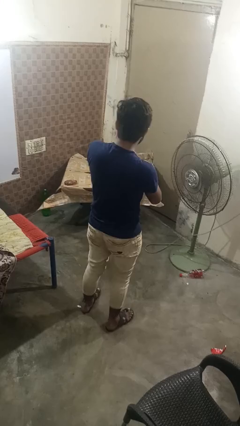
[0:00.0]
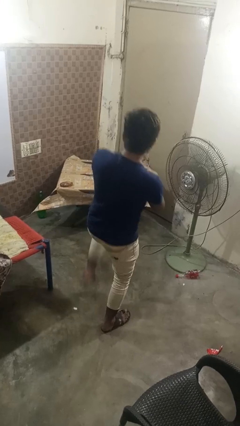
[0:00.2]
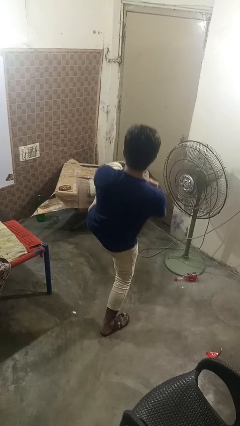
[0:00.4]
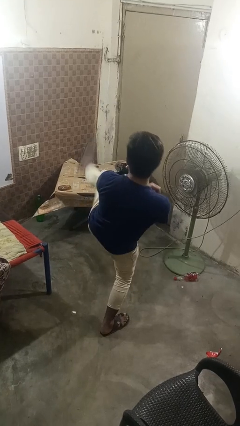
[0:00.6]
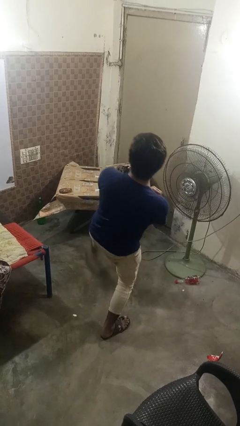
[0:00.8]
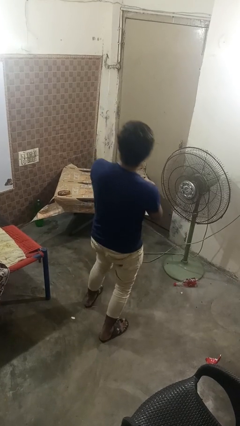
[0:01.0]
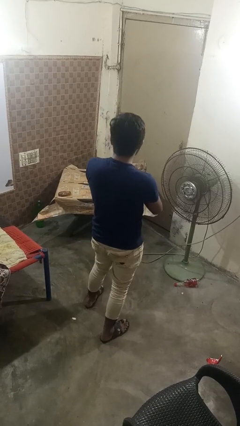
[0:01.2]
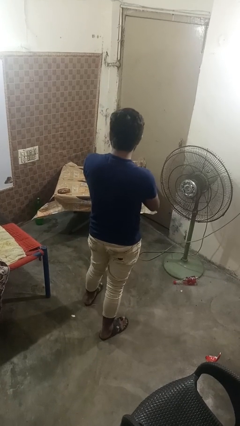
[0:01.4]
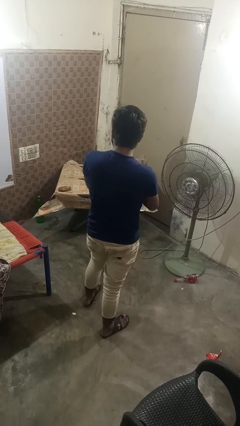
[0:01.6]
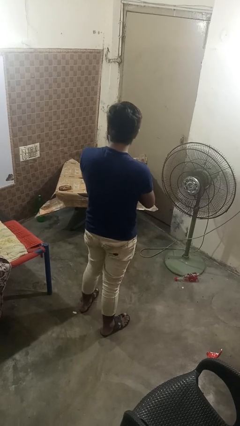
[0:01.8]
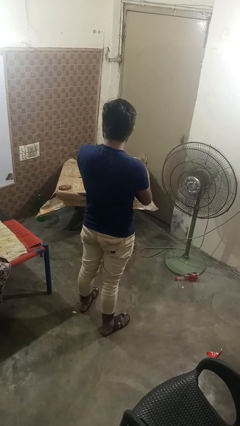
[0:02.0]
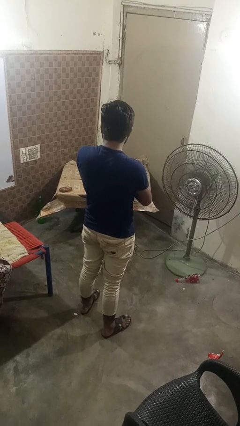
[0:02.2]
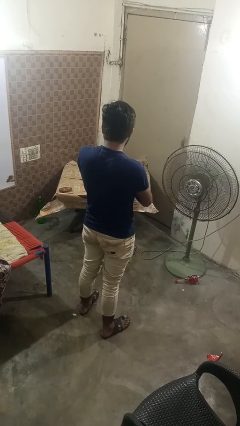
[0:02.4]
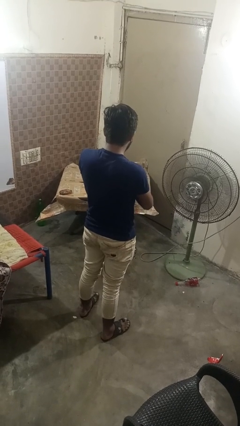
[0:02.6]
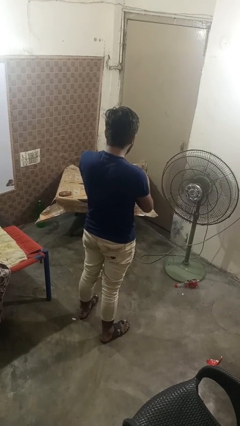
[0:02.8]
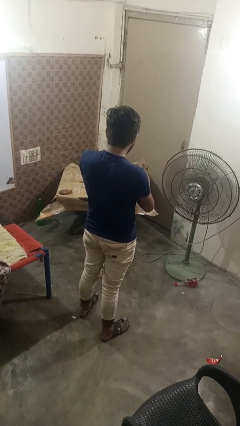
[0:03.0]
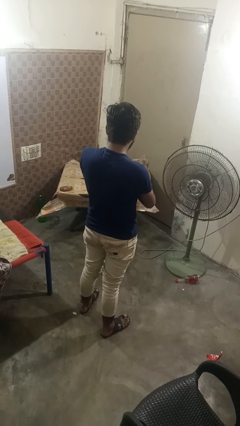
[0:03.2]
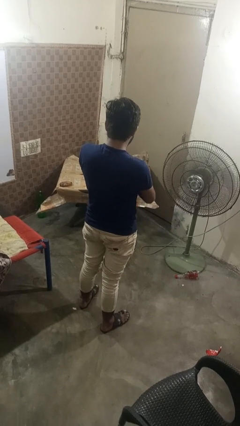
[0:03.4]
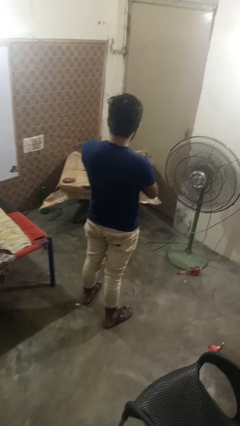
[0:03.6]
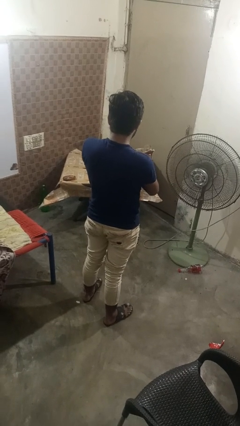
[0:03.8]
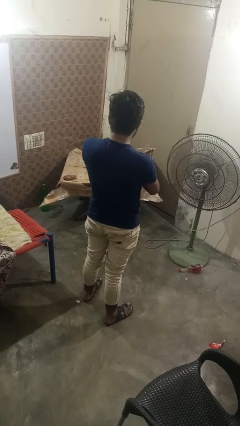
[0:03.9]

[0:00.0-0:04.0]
person karate kicks

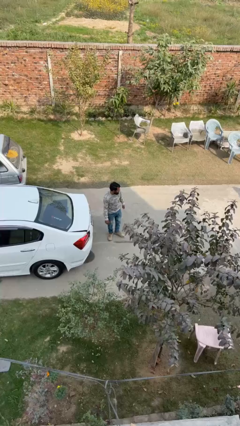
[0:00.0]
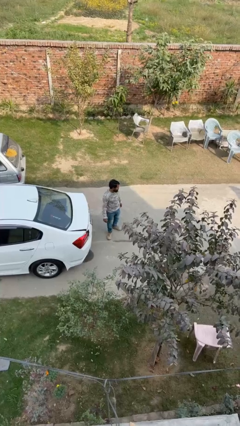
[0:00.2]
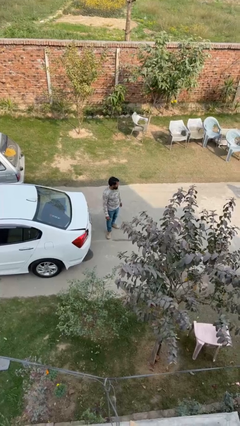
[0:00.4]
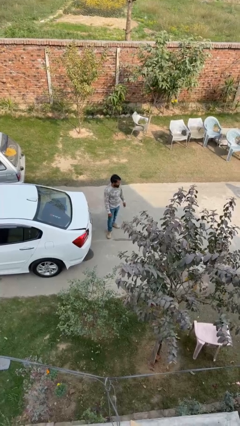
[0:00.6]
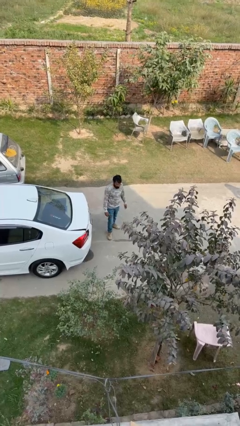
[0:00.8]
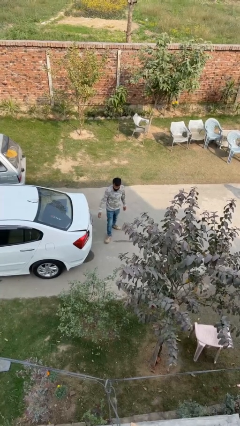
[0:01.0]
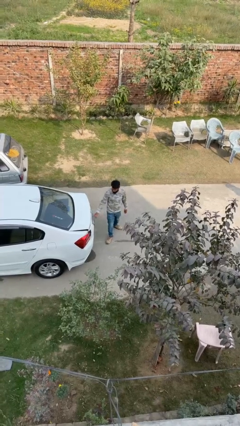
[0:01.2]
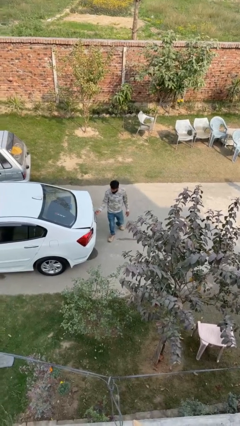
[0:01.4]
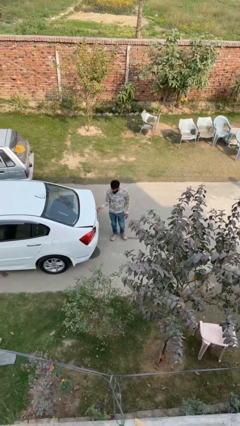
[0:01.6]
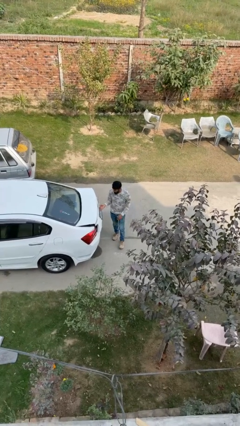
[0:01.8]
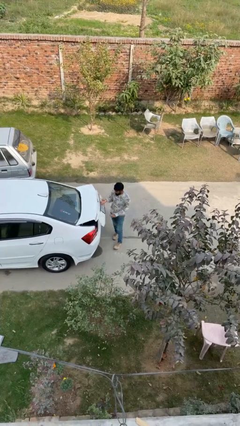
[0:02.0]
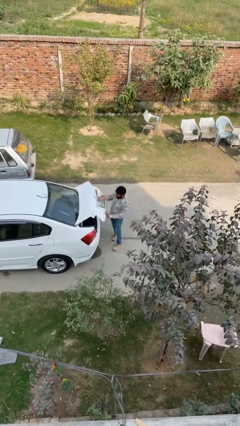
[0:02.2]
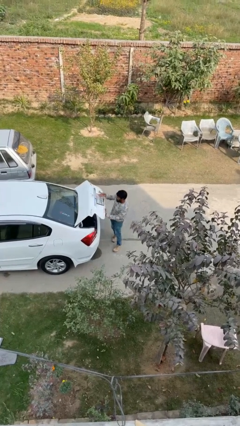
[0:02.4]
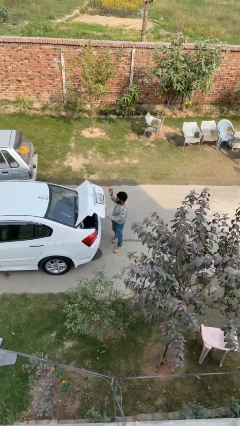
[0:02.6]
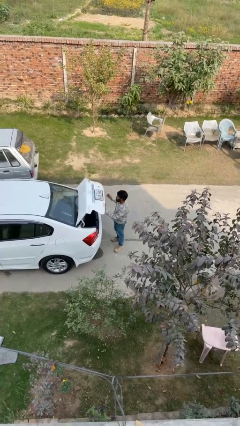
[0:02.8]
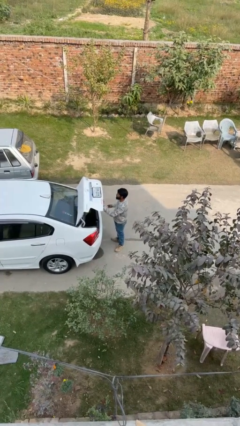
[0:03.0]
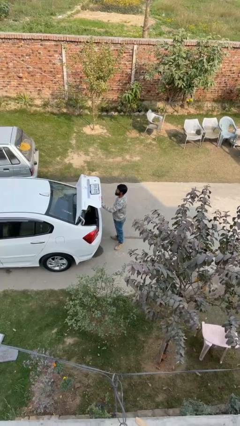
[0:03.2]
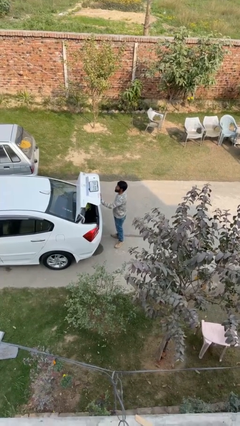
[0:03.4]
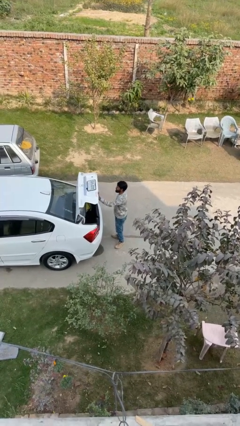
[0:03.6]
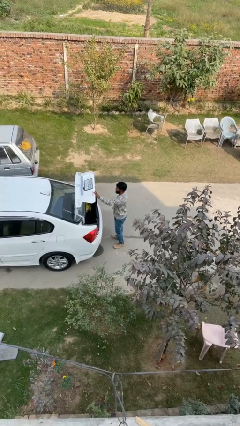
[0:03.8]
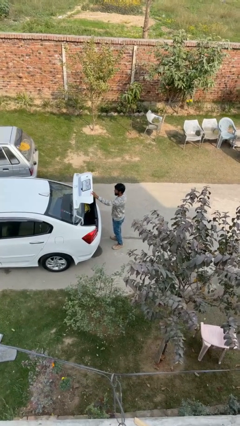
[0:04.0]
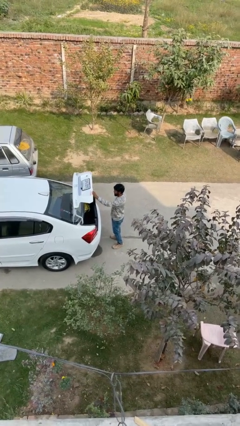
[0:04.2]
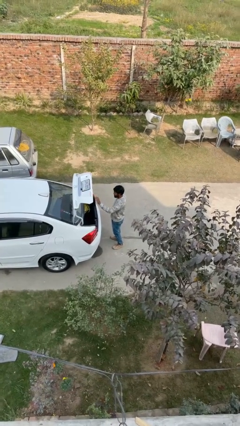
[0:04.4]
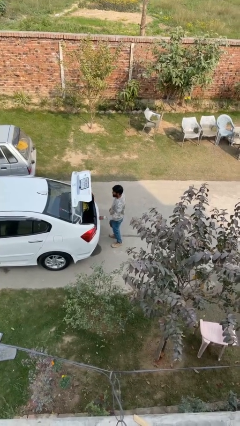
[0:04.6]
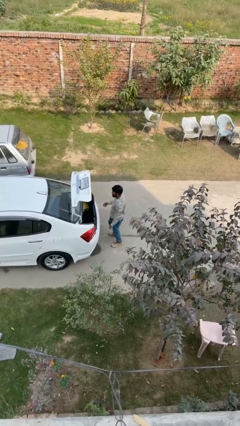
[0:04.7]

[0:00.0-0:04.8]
person opens car trunk

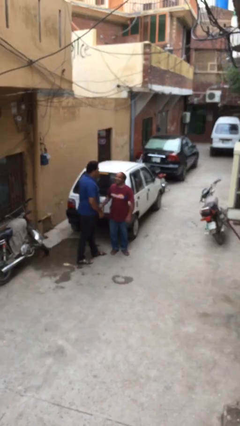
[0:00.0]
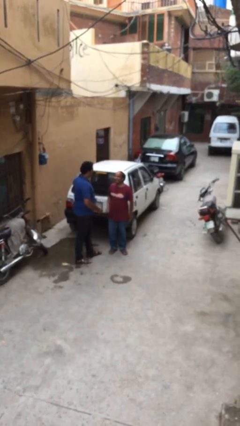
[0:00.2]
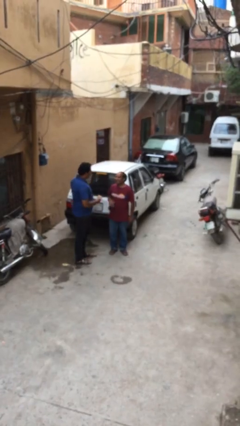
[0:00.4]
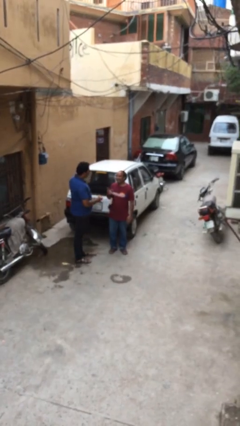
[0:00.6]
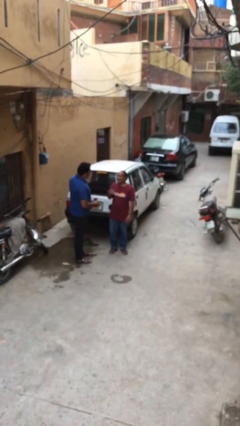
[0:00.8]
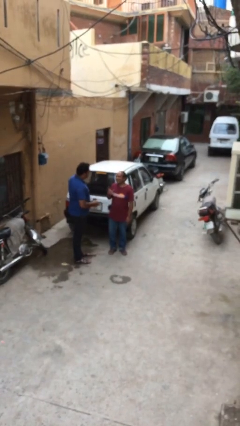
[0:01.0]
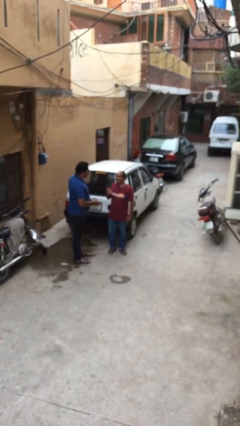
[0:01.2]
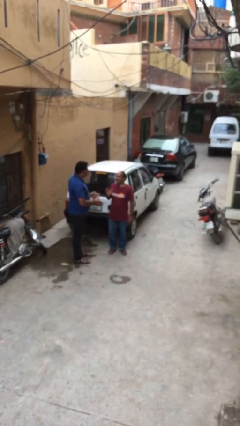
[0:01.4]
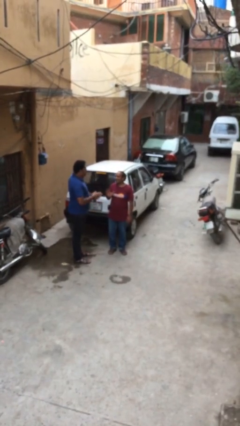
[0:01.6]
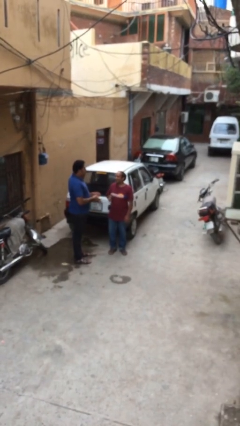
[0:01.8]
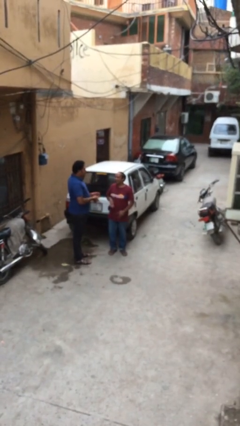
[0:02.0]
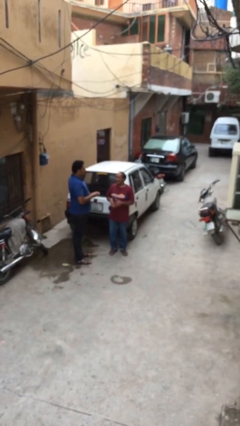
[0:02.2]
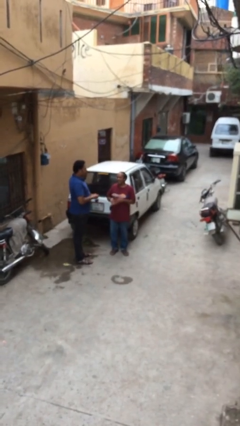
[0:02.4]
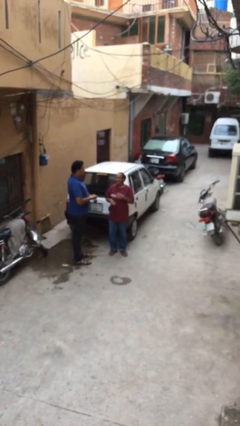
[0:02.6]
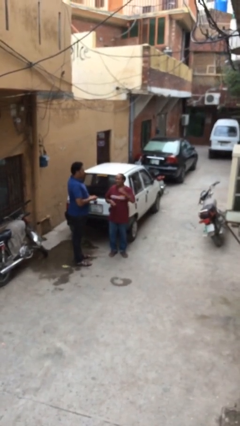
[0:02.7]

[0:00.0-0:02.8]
person talks to person

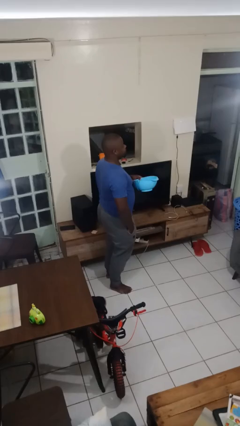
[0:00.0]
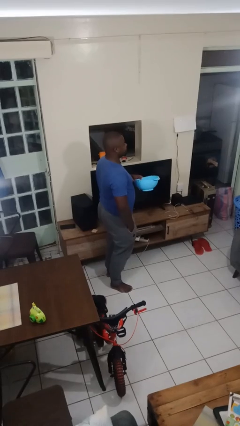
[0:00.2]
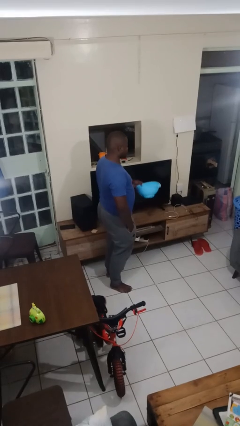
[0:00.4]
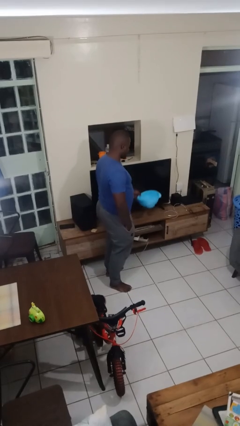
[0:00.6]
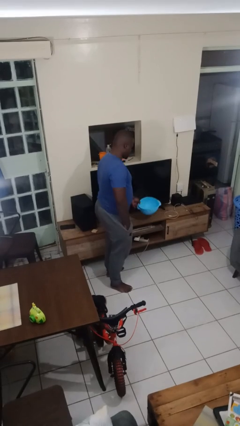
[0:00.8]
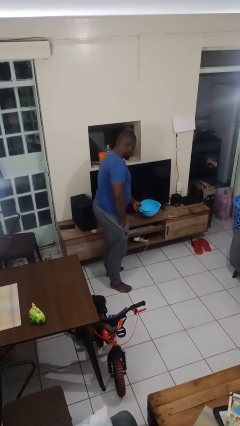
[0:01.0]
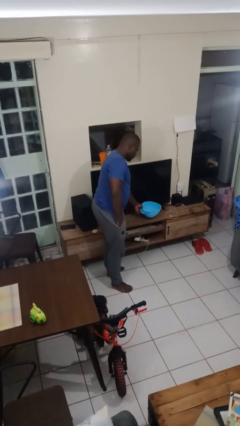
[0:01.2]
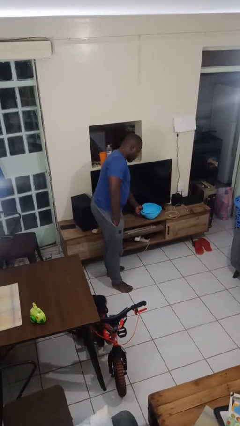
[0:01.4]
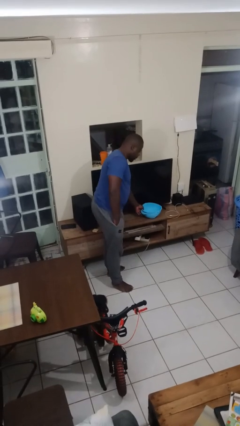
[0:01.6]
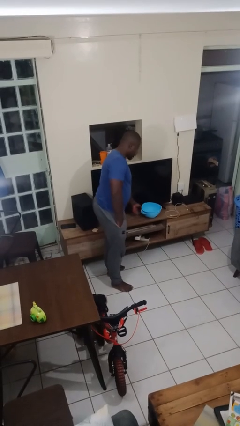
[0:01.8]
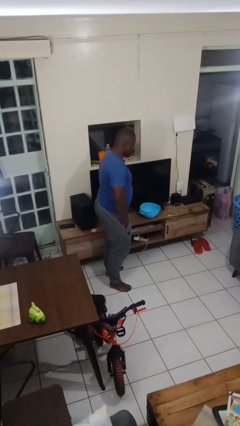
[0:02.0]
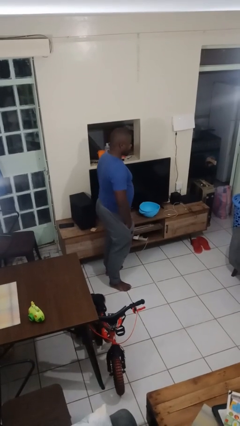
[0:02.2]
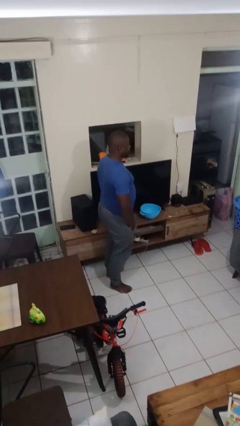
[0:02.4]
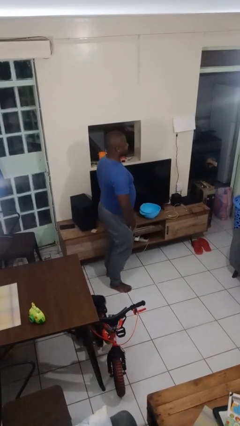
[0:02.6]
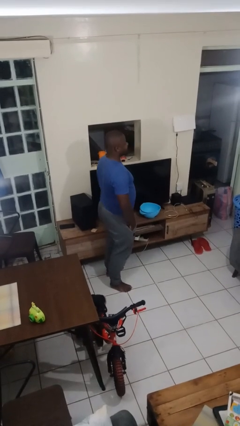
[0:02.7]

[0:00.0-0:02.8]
person puts down object on countertop

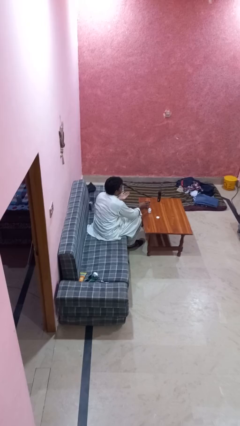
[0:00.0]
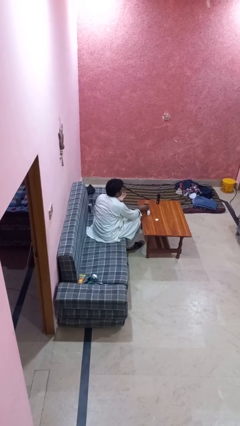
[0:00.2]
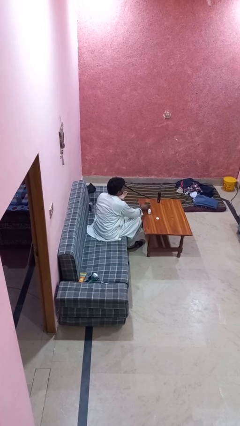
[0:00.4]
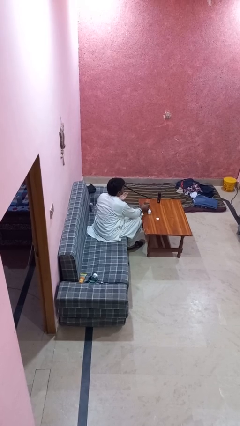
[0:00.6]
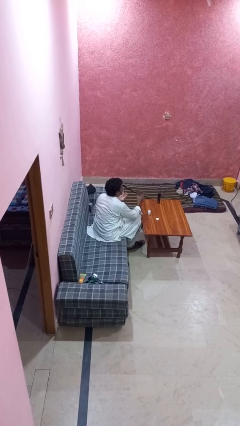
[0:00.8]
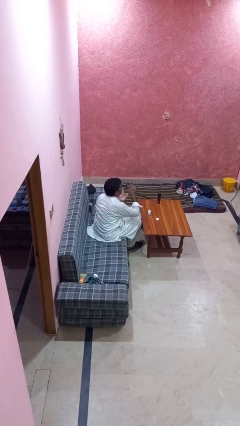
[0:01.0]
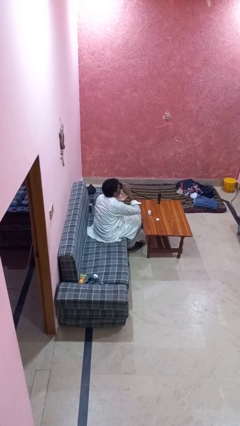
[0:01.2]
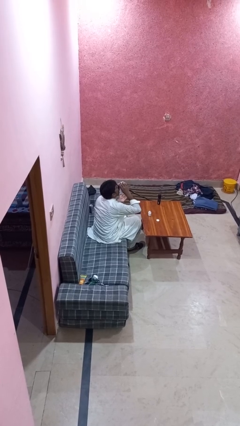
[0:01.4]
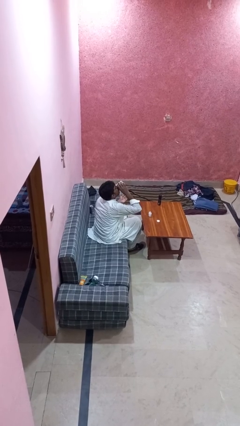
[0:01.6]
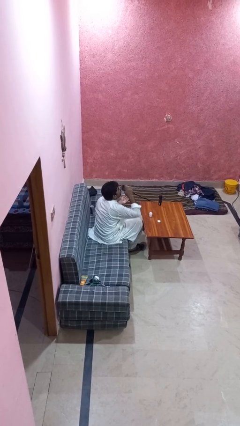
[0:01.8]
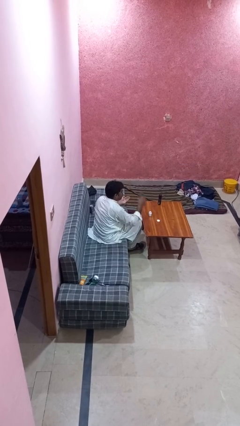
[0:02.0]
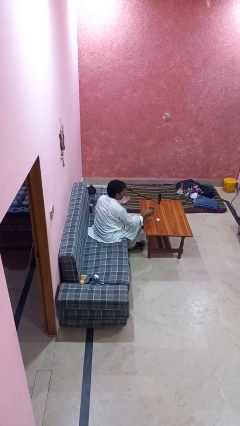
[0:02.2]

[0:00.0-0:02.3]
person drinks from cup

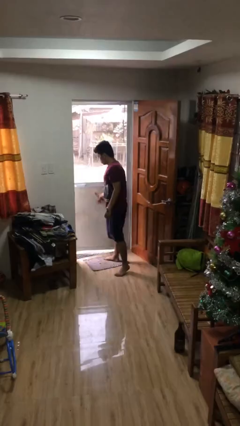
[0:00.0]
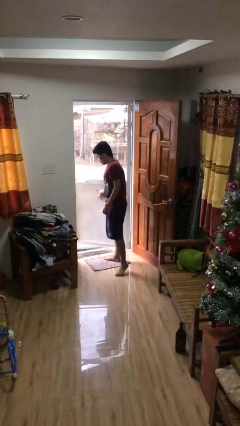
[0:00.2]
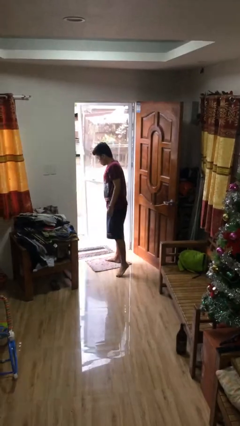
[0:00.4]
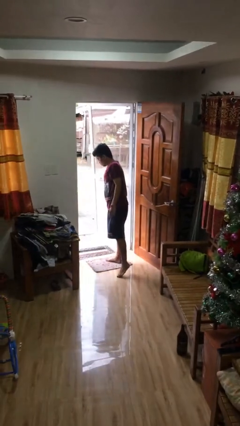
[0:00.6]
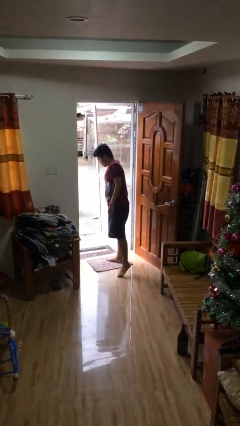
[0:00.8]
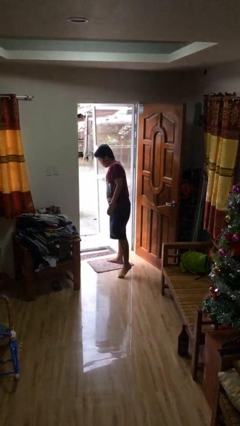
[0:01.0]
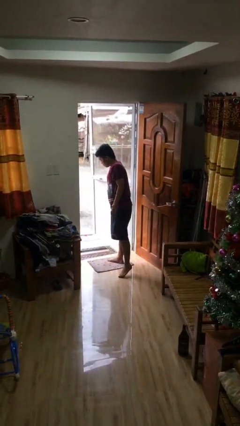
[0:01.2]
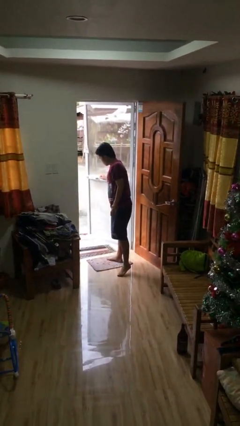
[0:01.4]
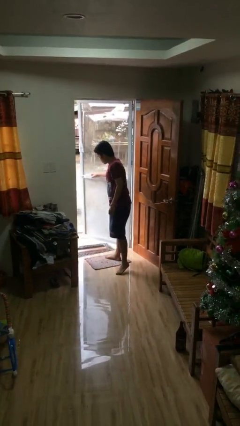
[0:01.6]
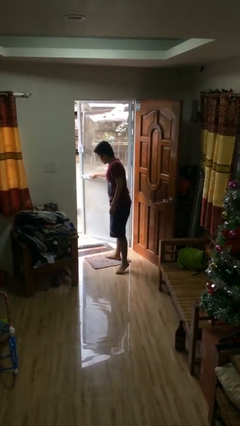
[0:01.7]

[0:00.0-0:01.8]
person opens facility door
